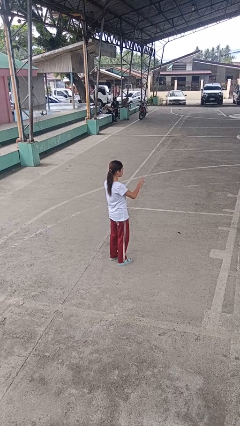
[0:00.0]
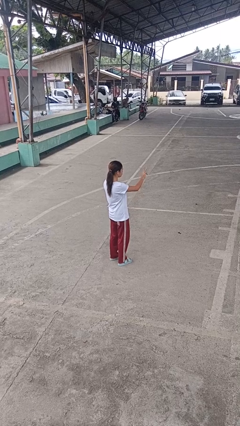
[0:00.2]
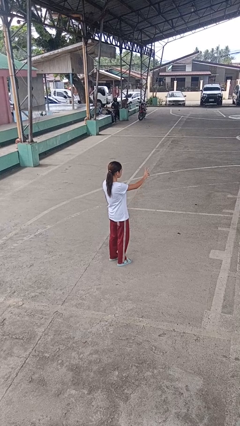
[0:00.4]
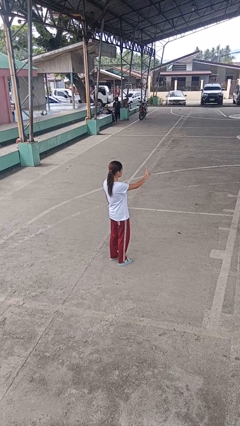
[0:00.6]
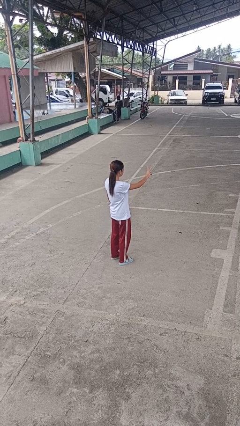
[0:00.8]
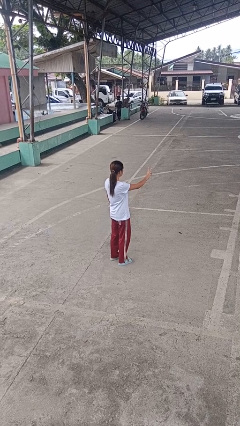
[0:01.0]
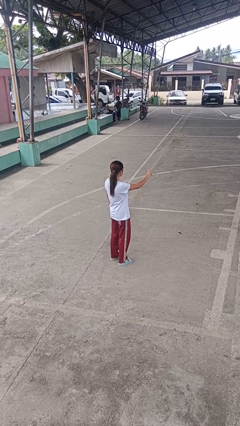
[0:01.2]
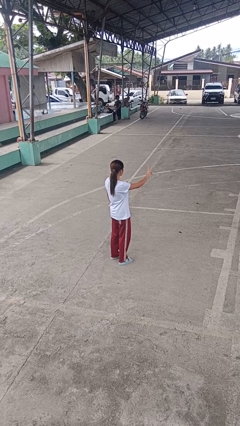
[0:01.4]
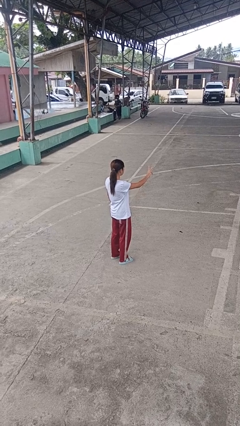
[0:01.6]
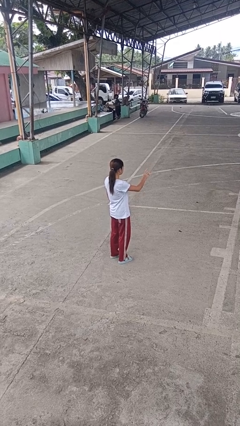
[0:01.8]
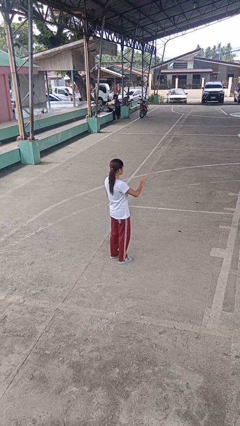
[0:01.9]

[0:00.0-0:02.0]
person gestures peace

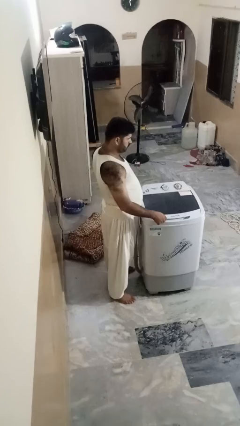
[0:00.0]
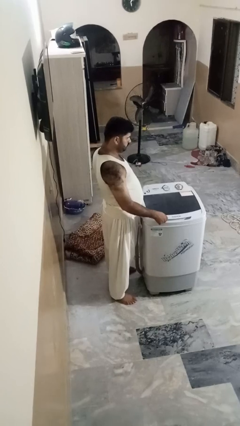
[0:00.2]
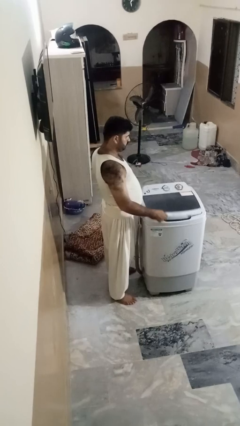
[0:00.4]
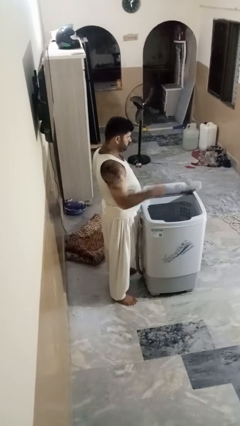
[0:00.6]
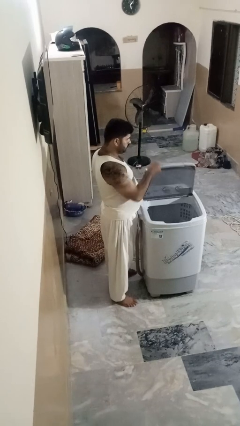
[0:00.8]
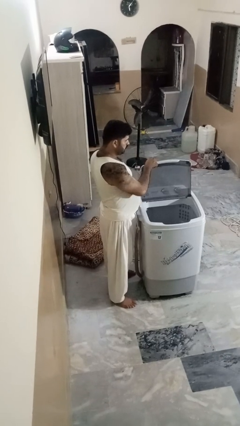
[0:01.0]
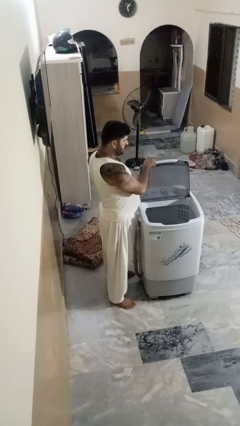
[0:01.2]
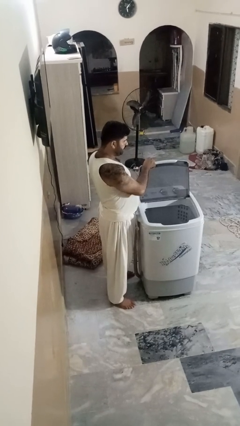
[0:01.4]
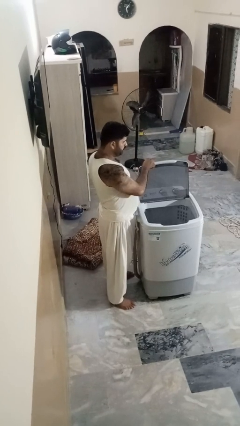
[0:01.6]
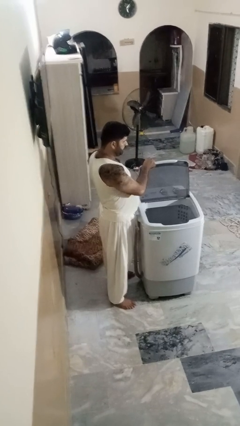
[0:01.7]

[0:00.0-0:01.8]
person opens clothes washer

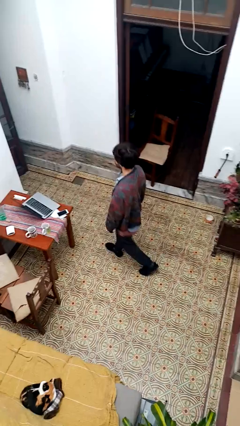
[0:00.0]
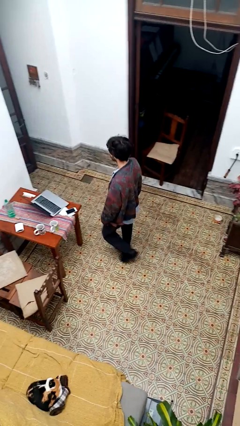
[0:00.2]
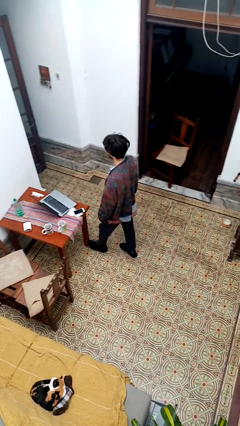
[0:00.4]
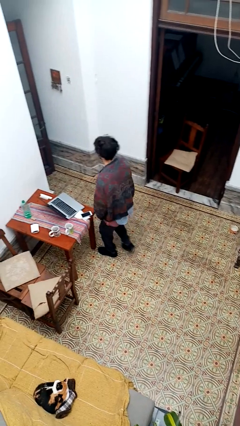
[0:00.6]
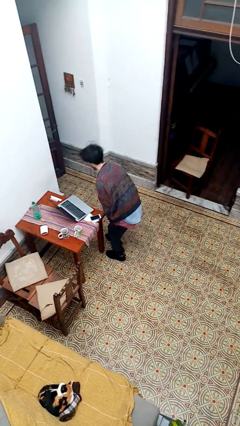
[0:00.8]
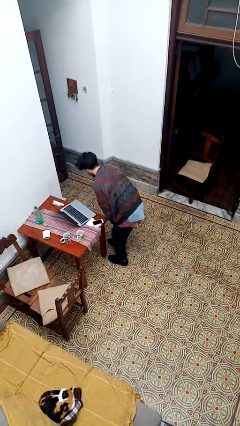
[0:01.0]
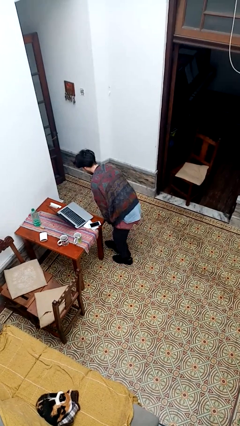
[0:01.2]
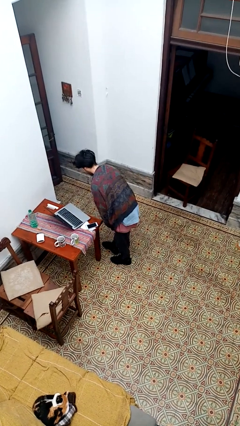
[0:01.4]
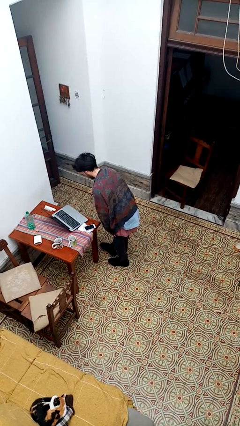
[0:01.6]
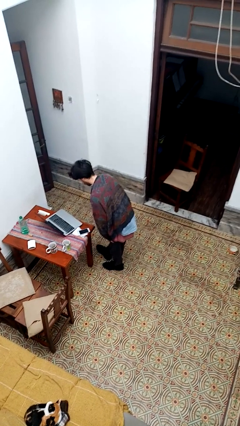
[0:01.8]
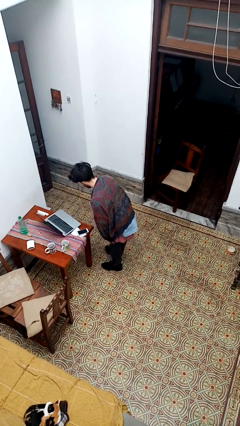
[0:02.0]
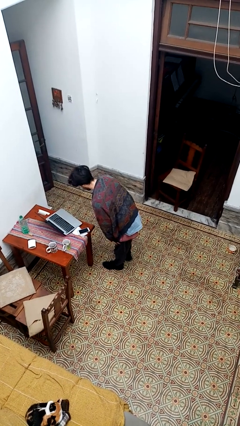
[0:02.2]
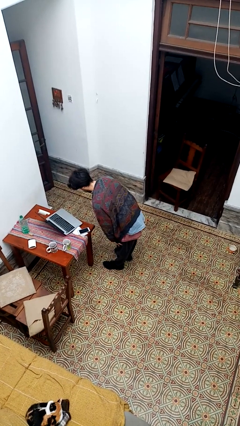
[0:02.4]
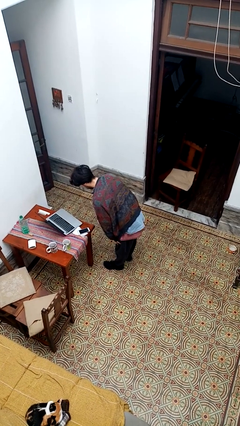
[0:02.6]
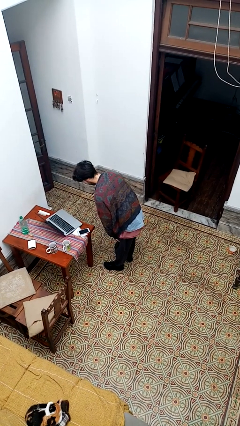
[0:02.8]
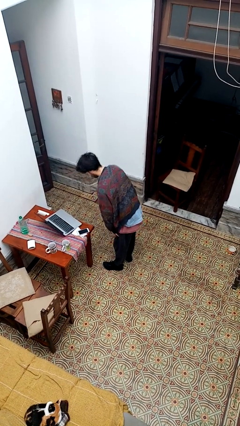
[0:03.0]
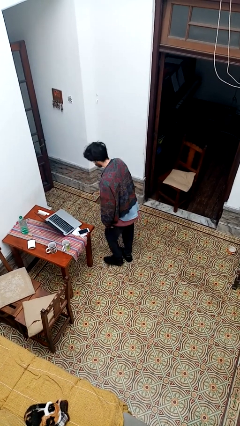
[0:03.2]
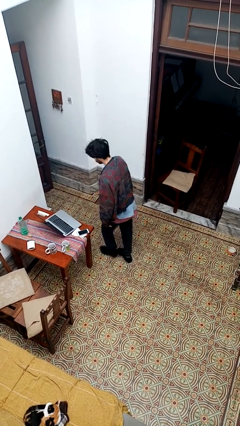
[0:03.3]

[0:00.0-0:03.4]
person bumps into table

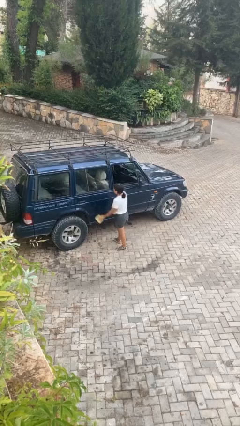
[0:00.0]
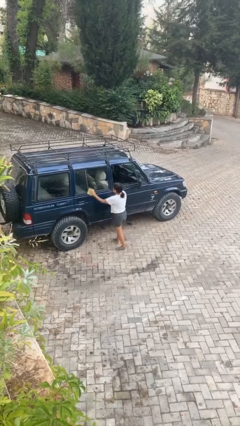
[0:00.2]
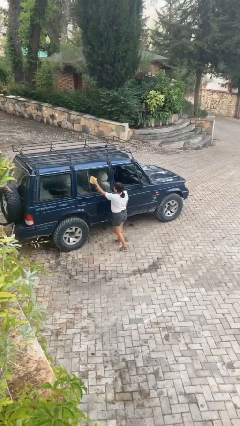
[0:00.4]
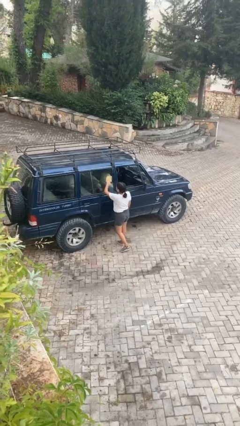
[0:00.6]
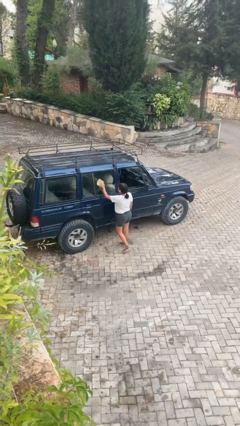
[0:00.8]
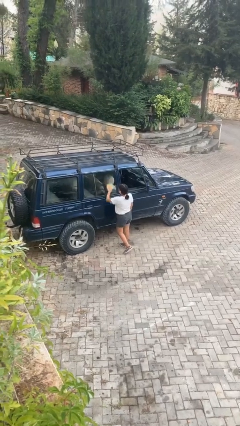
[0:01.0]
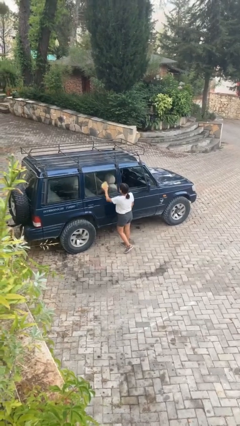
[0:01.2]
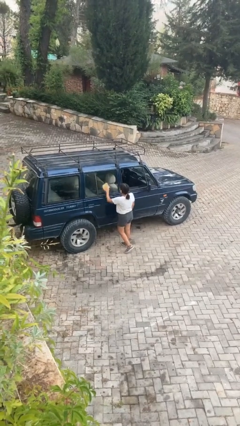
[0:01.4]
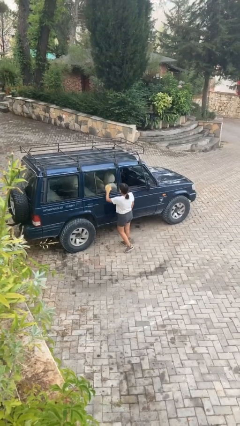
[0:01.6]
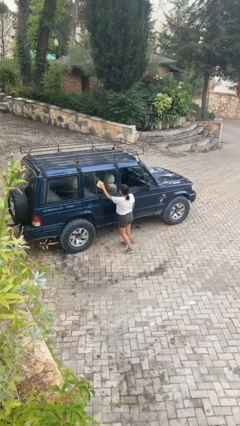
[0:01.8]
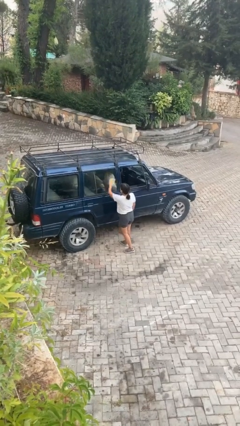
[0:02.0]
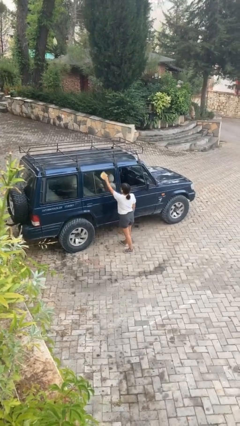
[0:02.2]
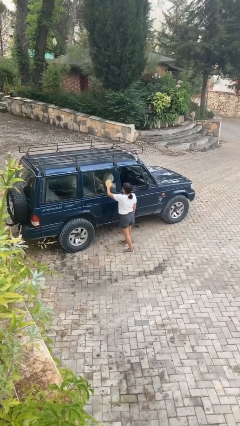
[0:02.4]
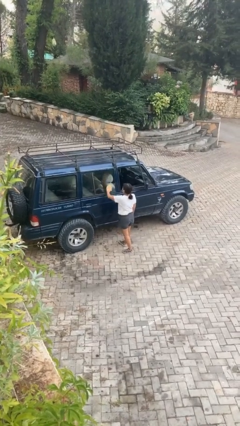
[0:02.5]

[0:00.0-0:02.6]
person polishes car with rag

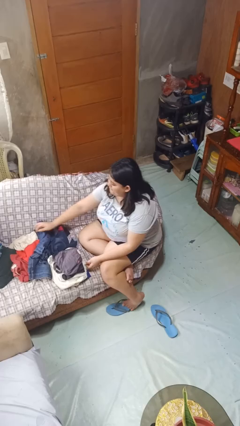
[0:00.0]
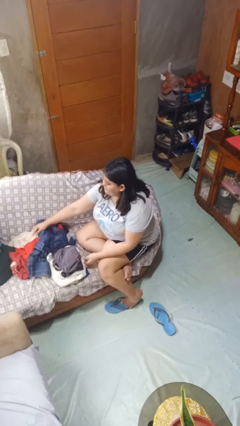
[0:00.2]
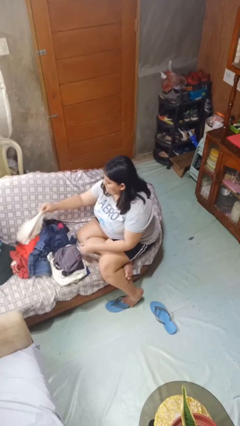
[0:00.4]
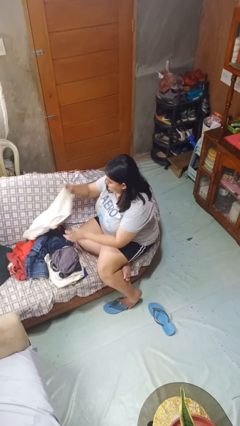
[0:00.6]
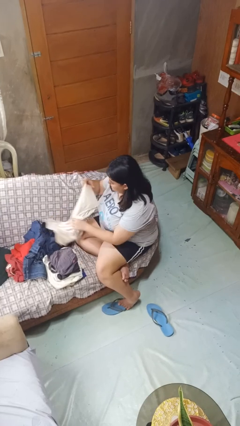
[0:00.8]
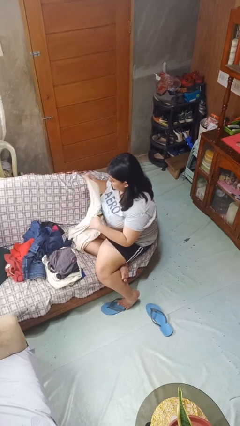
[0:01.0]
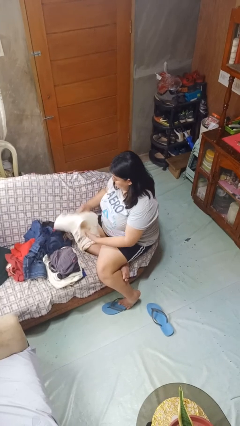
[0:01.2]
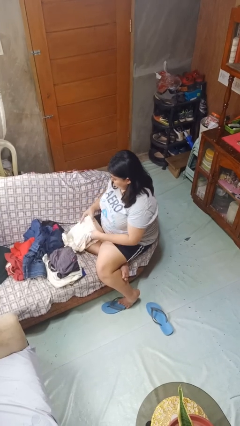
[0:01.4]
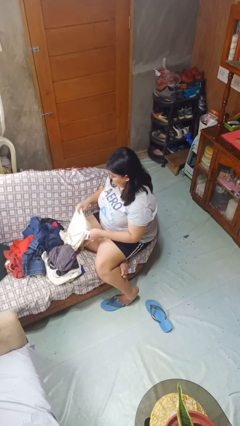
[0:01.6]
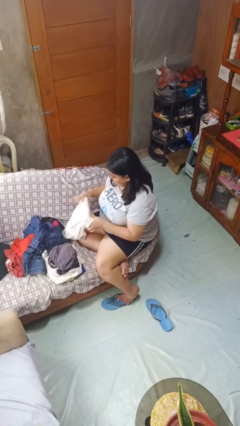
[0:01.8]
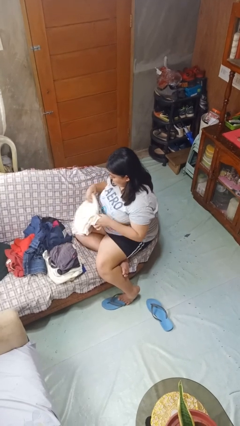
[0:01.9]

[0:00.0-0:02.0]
person folds shirt

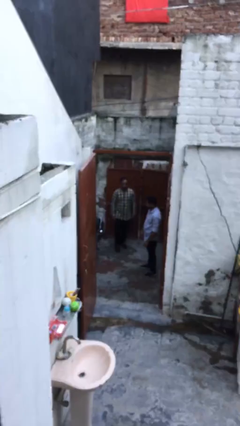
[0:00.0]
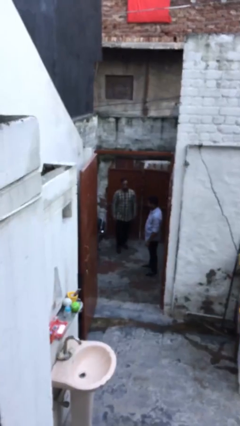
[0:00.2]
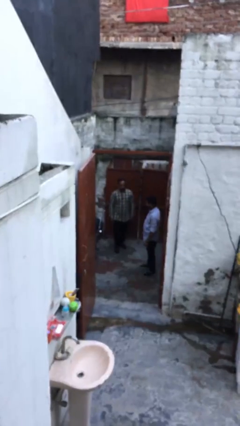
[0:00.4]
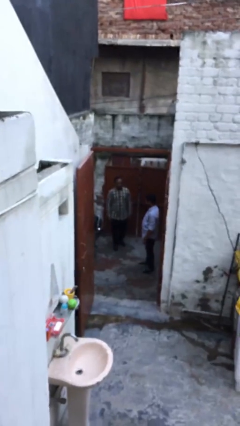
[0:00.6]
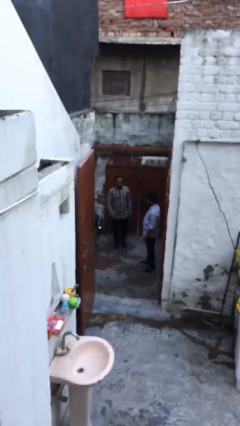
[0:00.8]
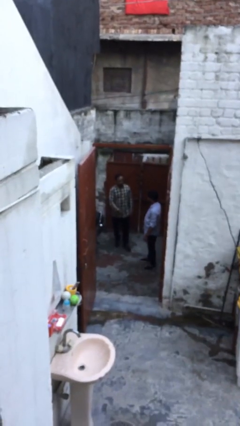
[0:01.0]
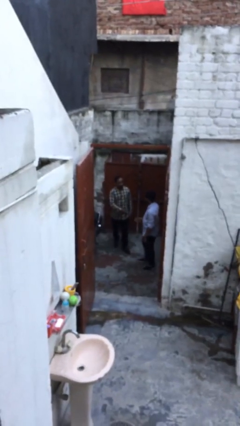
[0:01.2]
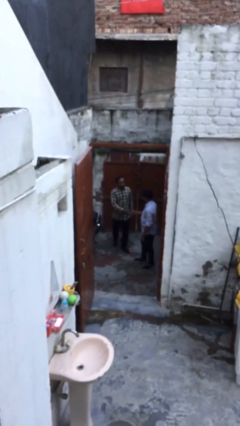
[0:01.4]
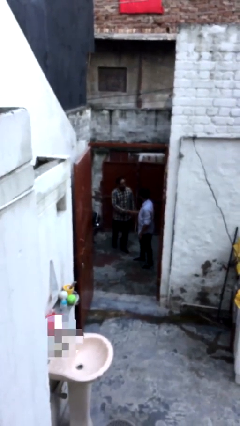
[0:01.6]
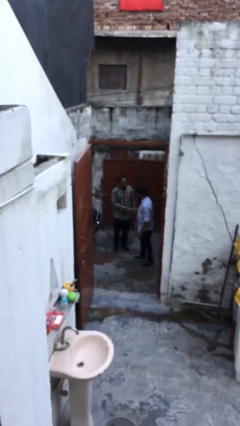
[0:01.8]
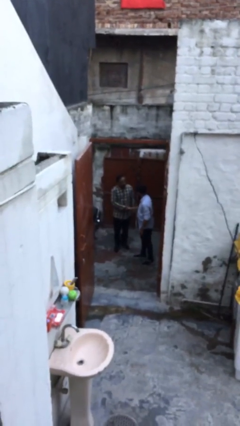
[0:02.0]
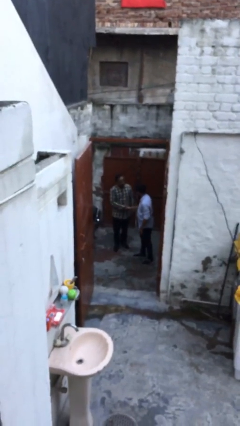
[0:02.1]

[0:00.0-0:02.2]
person shakes hand

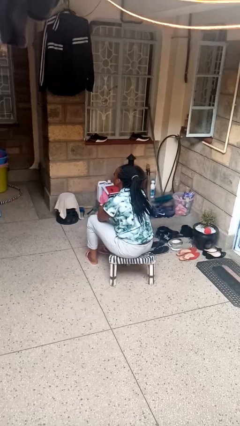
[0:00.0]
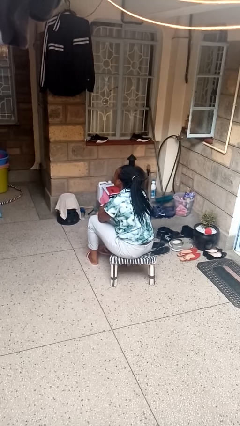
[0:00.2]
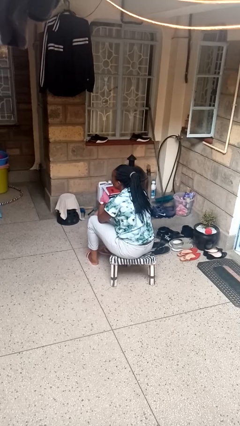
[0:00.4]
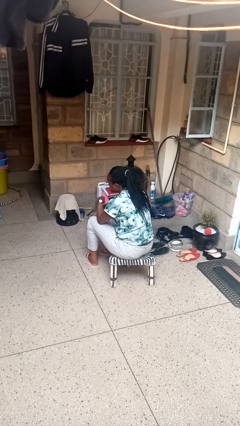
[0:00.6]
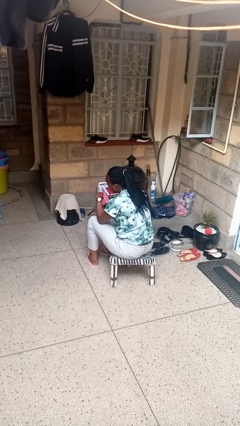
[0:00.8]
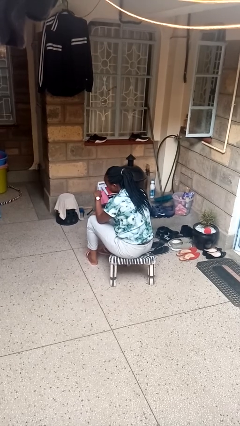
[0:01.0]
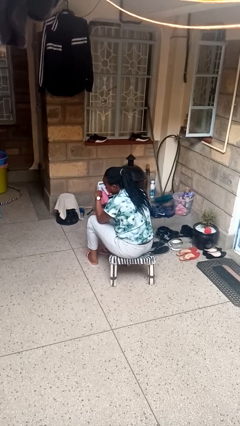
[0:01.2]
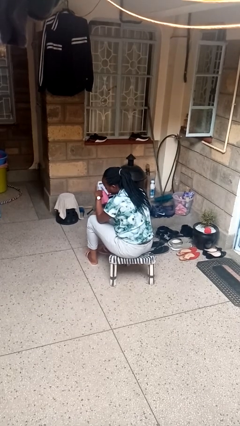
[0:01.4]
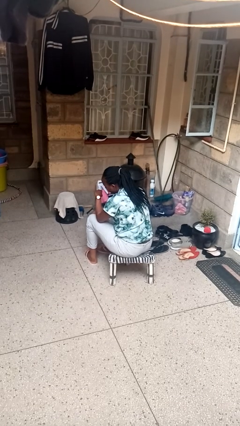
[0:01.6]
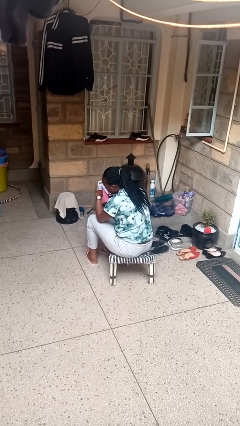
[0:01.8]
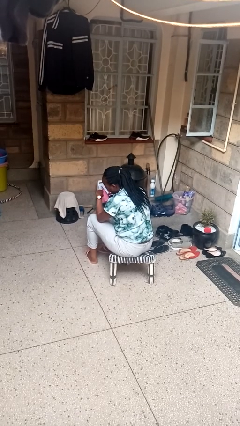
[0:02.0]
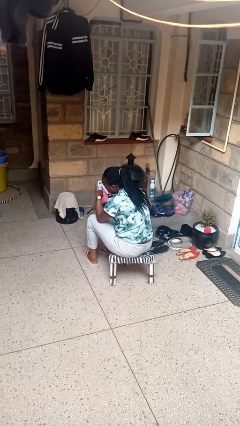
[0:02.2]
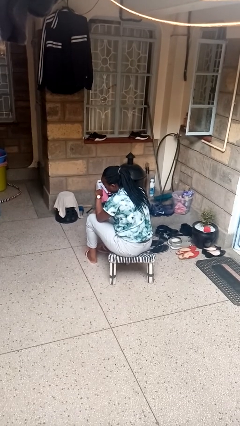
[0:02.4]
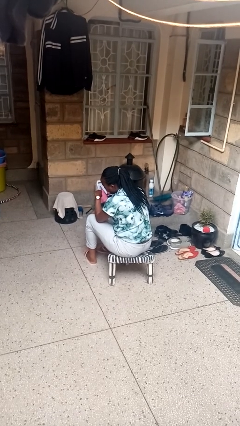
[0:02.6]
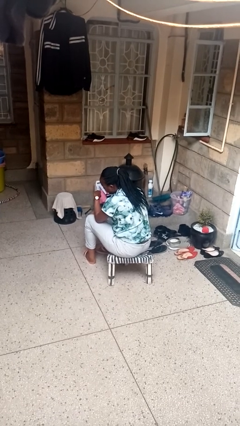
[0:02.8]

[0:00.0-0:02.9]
person looks at wristwatch

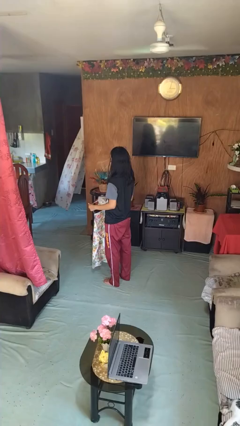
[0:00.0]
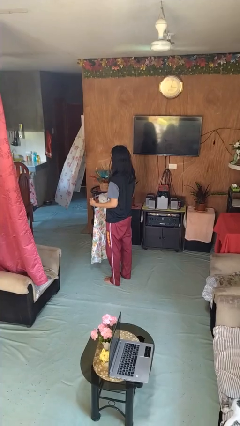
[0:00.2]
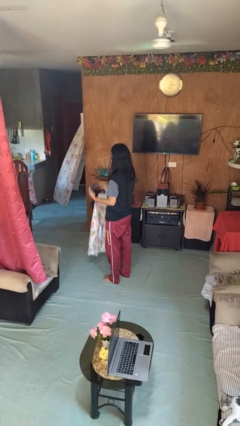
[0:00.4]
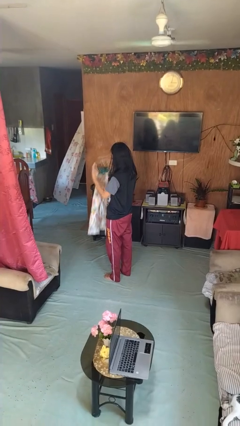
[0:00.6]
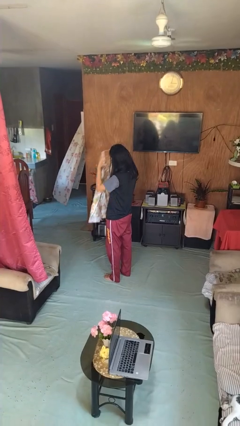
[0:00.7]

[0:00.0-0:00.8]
person puts on apron
